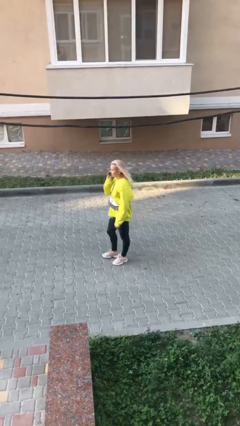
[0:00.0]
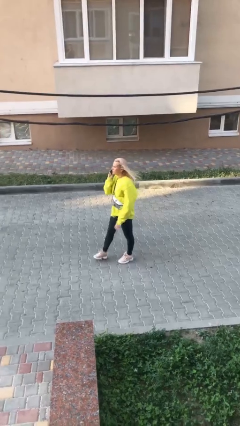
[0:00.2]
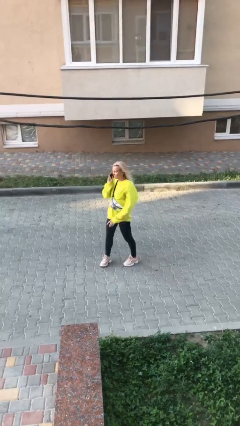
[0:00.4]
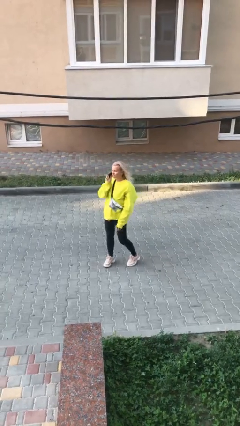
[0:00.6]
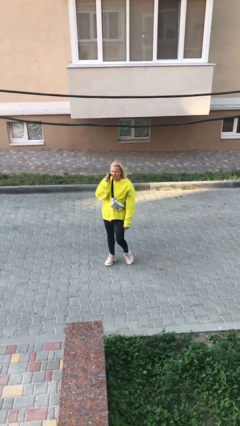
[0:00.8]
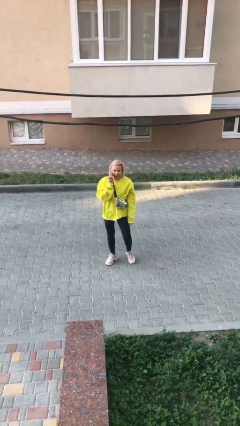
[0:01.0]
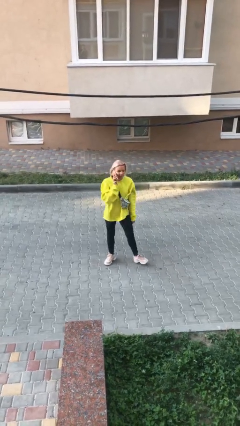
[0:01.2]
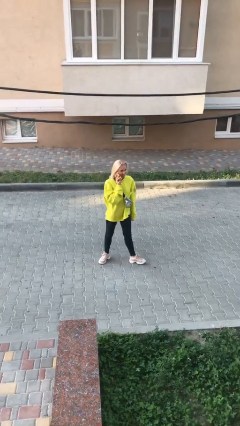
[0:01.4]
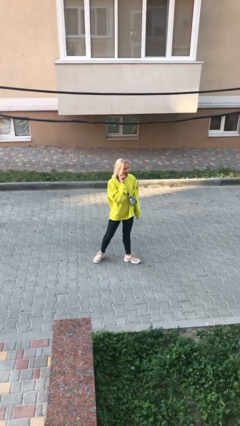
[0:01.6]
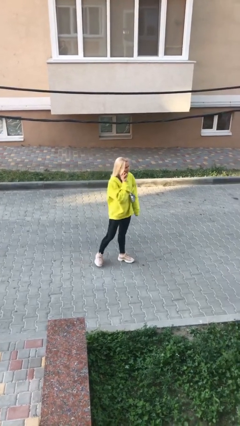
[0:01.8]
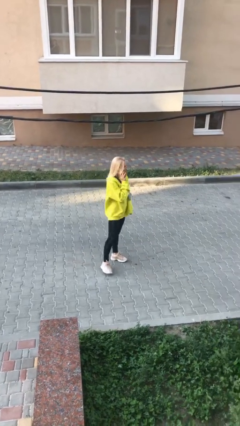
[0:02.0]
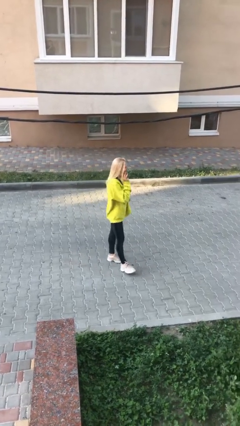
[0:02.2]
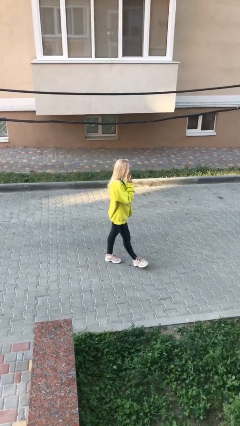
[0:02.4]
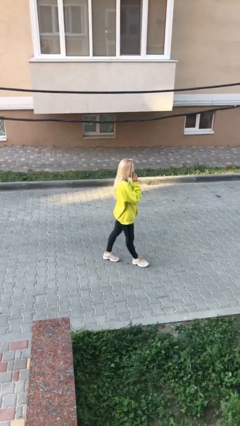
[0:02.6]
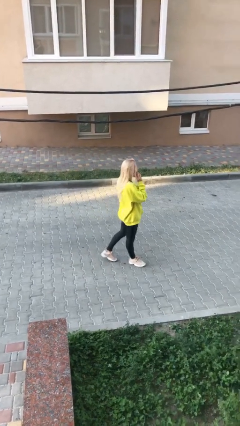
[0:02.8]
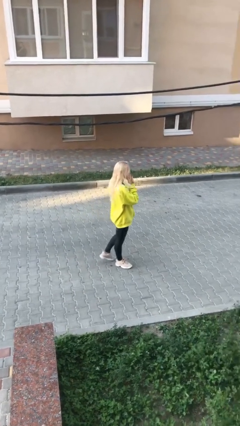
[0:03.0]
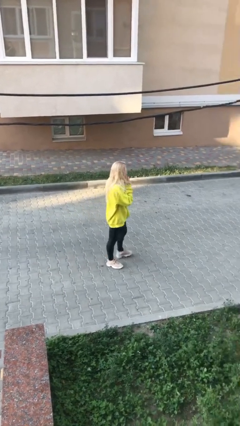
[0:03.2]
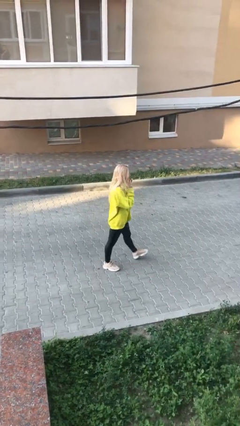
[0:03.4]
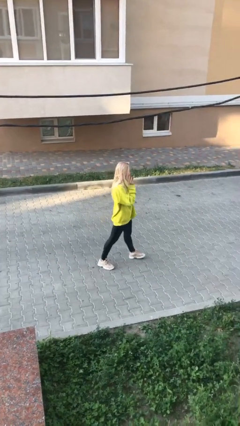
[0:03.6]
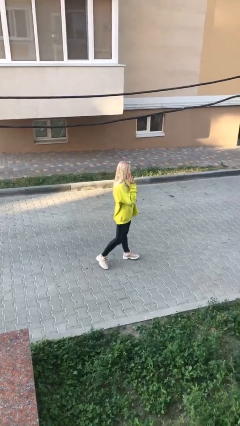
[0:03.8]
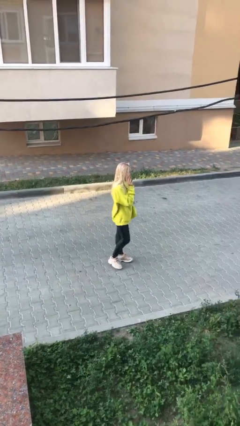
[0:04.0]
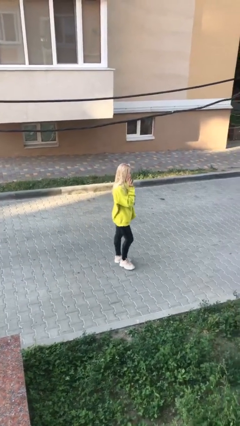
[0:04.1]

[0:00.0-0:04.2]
person talks on phone

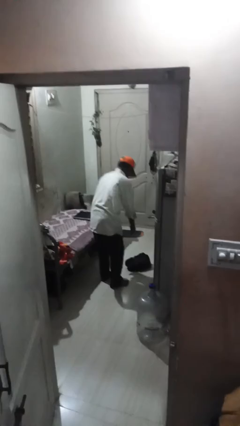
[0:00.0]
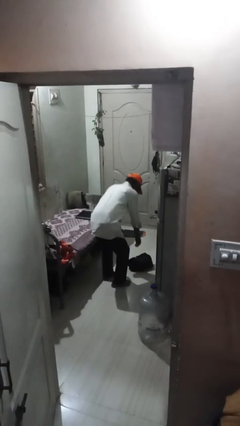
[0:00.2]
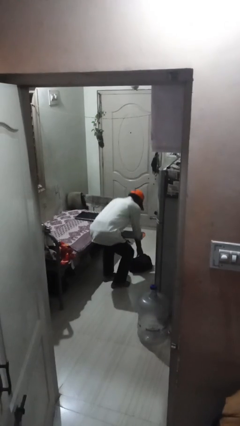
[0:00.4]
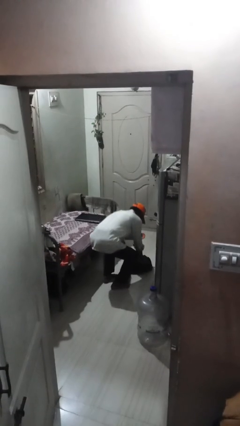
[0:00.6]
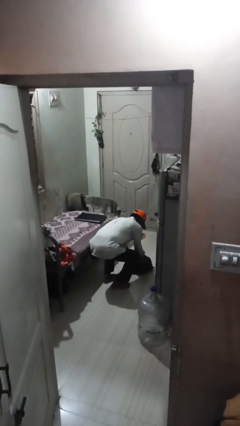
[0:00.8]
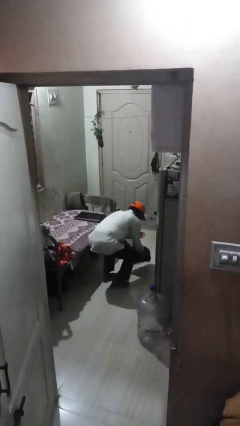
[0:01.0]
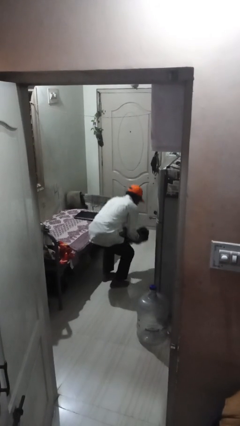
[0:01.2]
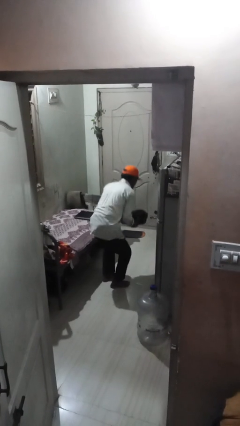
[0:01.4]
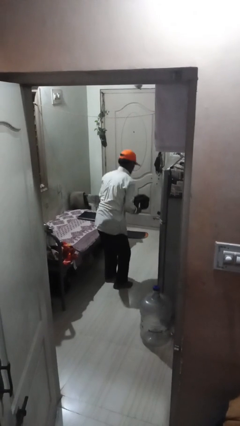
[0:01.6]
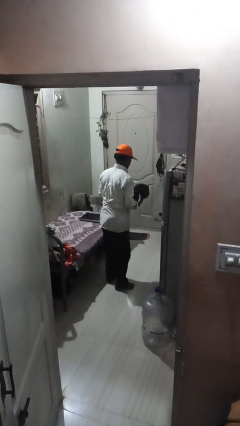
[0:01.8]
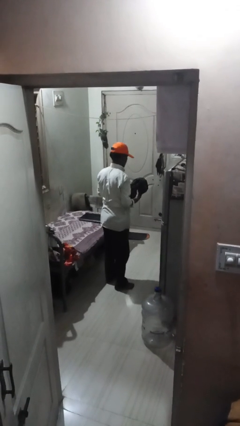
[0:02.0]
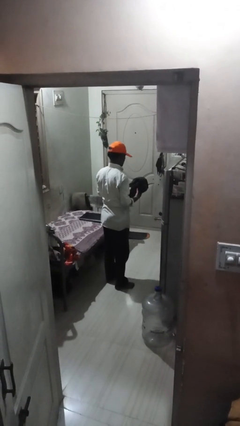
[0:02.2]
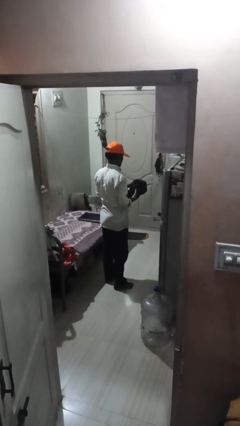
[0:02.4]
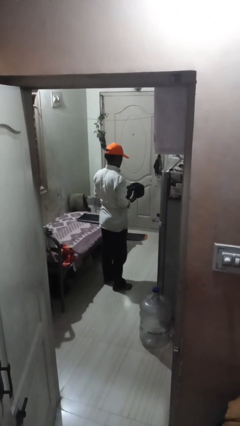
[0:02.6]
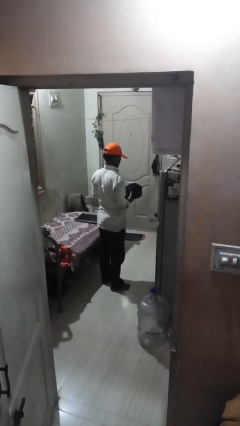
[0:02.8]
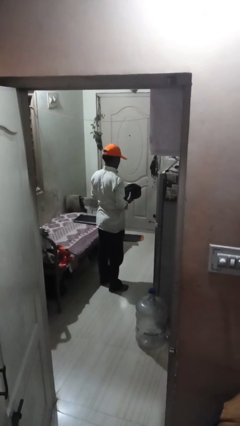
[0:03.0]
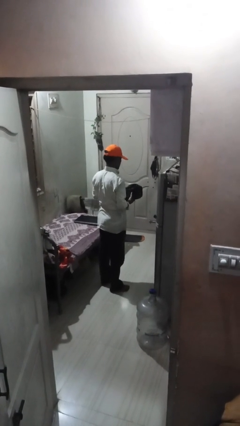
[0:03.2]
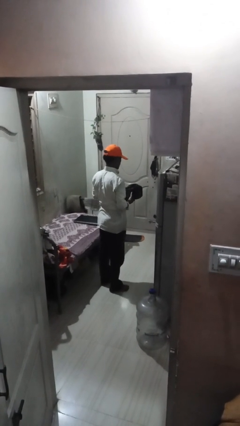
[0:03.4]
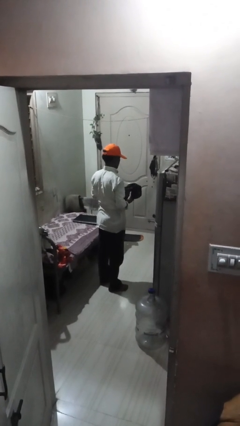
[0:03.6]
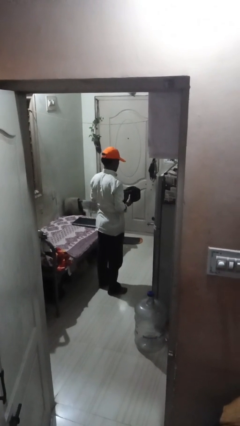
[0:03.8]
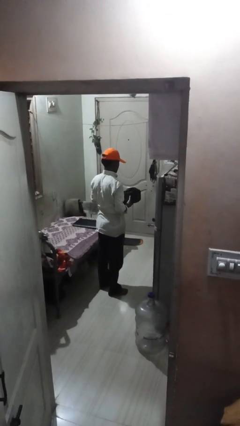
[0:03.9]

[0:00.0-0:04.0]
person picks up object from floor

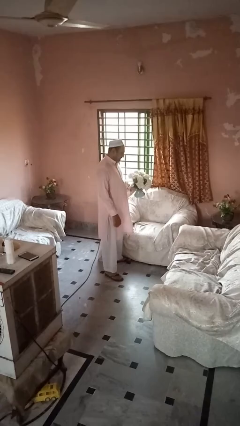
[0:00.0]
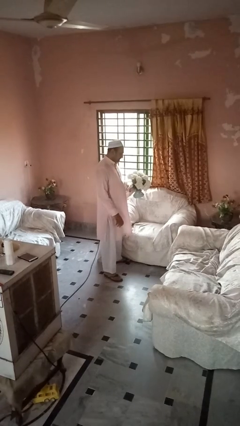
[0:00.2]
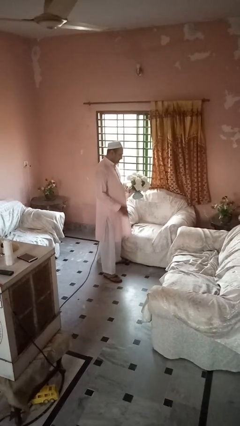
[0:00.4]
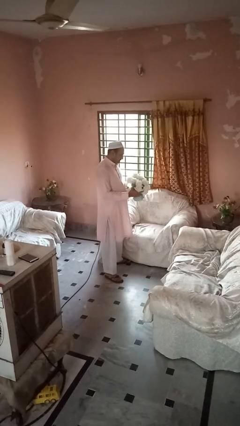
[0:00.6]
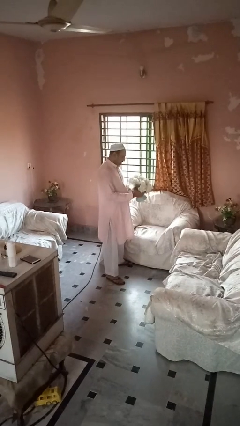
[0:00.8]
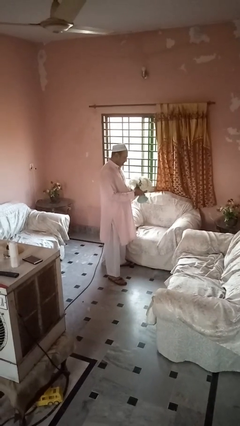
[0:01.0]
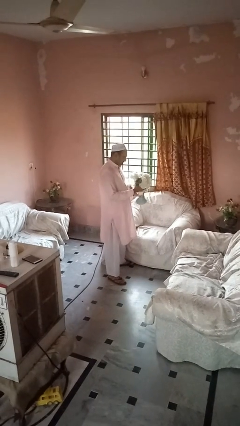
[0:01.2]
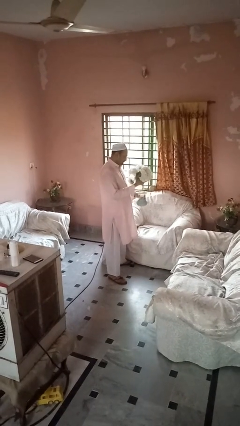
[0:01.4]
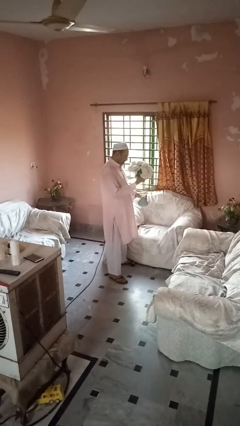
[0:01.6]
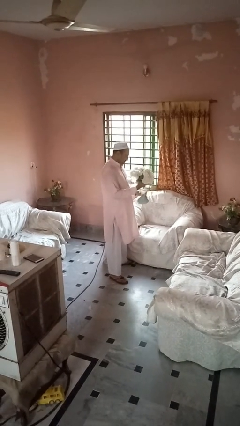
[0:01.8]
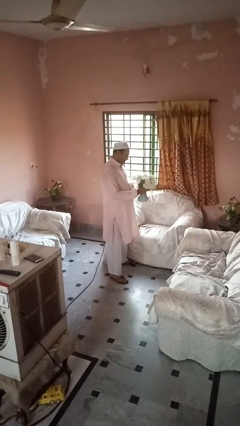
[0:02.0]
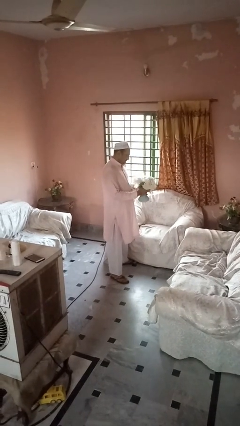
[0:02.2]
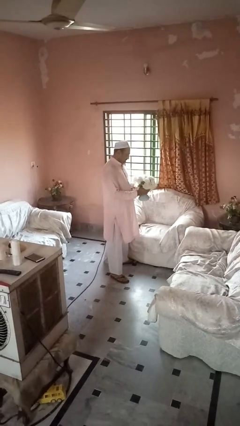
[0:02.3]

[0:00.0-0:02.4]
person arranges flowers in vase

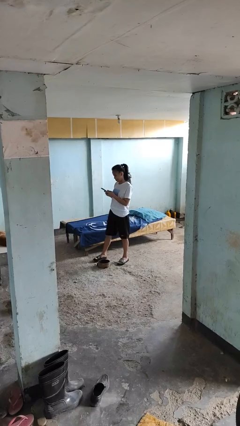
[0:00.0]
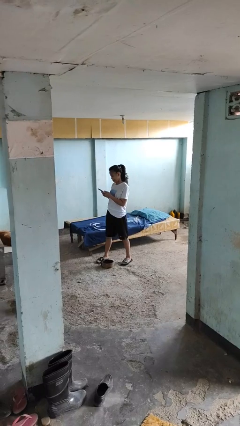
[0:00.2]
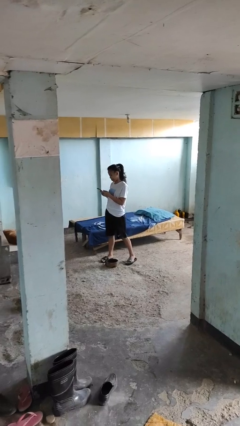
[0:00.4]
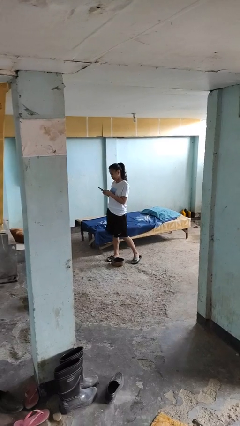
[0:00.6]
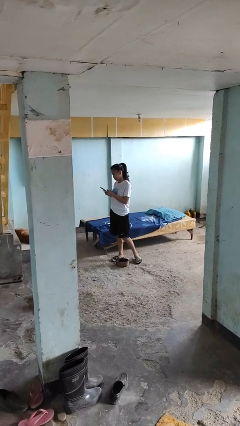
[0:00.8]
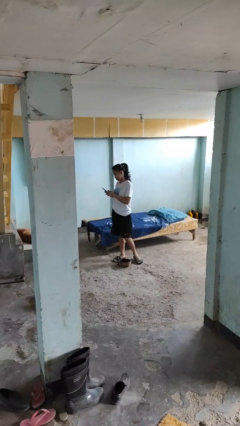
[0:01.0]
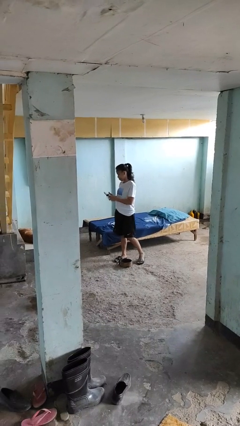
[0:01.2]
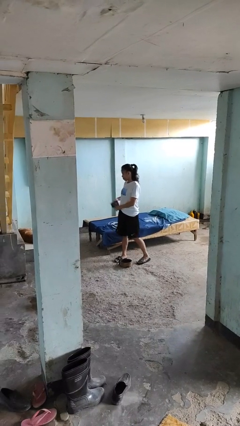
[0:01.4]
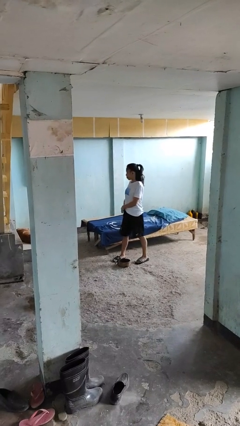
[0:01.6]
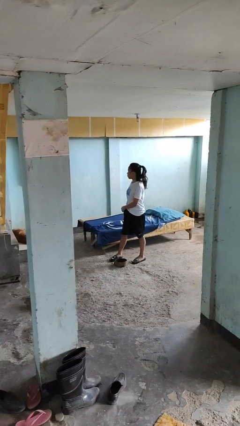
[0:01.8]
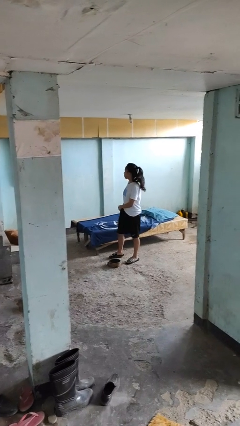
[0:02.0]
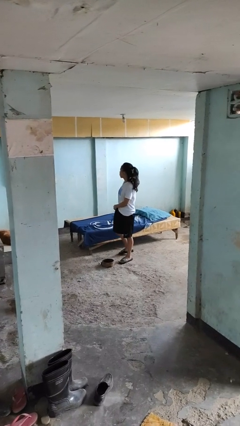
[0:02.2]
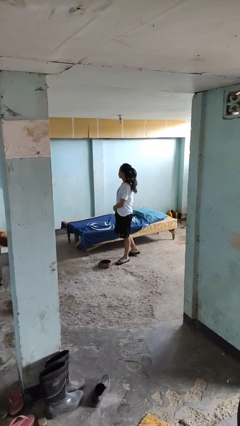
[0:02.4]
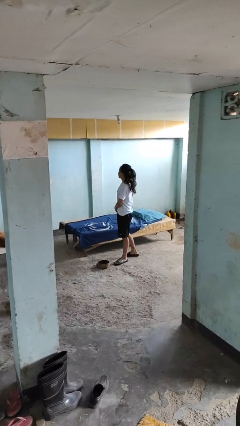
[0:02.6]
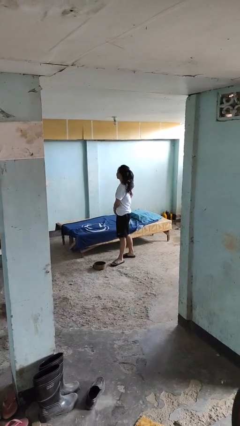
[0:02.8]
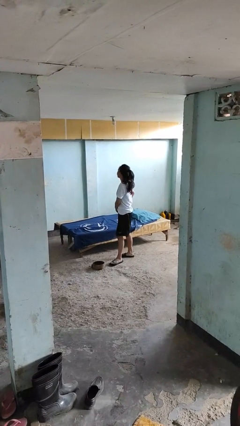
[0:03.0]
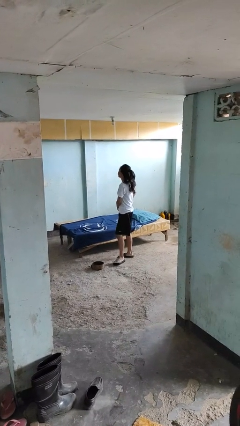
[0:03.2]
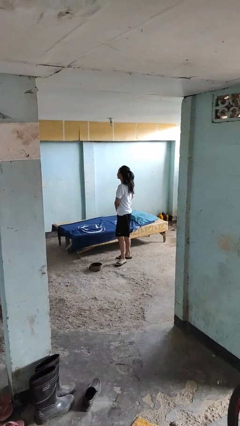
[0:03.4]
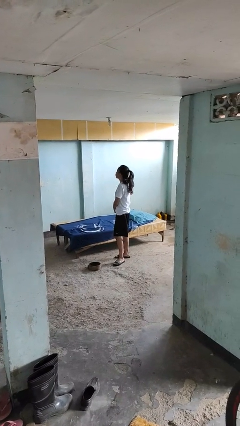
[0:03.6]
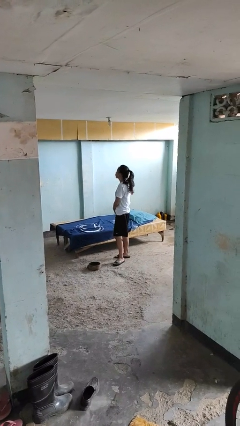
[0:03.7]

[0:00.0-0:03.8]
person puts phone into pocket

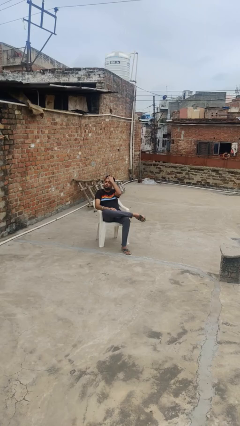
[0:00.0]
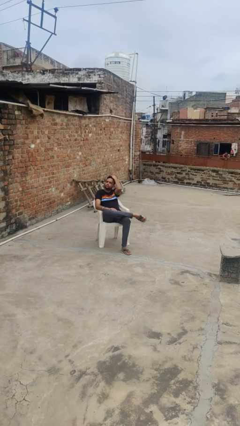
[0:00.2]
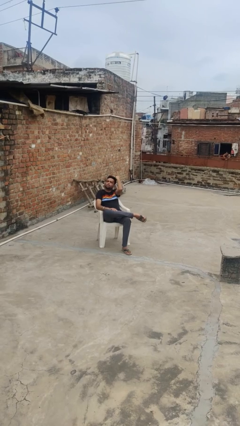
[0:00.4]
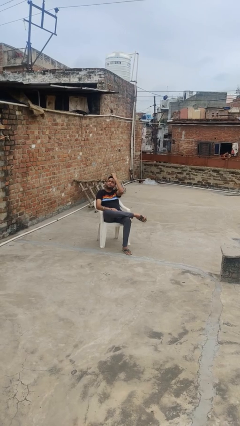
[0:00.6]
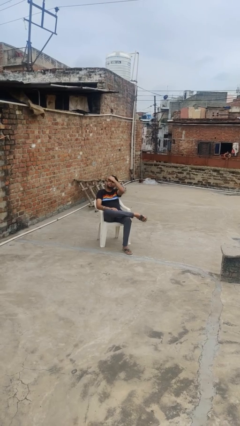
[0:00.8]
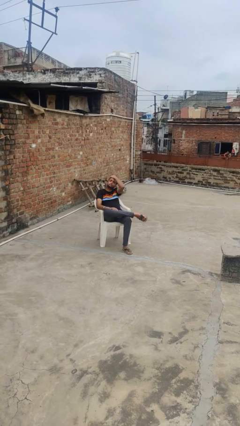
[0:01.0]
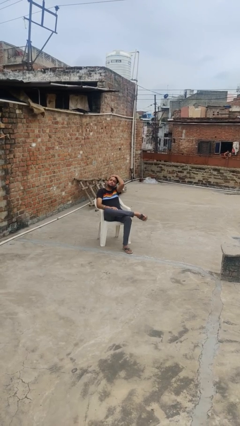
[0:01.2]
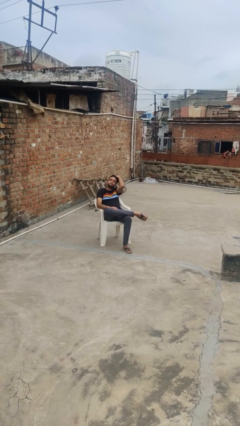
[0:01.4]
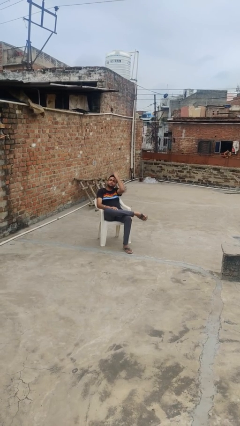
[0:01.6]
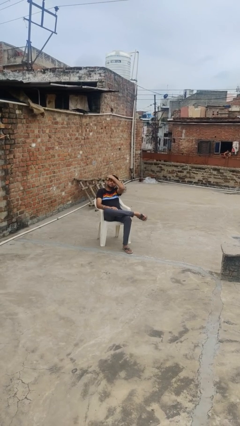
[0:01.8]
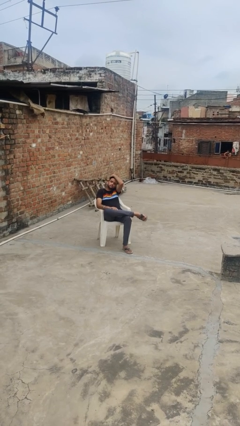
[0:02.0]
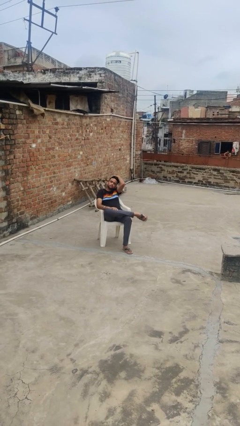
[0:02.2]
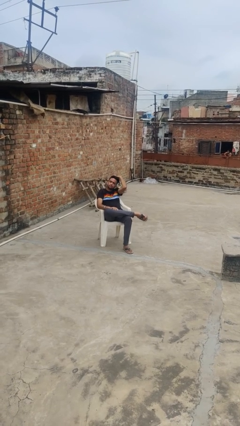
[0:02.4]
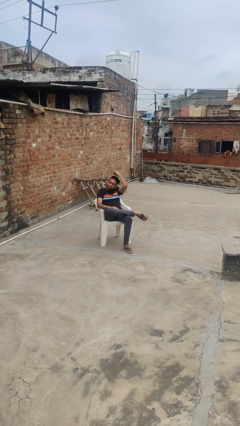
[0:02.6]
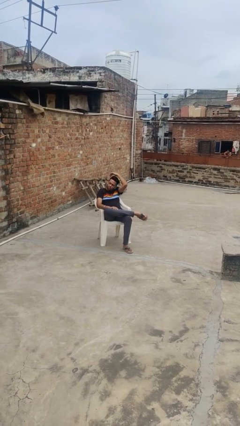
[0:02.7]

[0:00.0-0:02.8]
person strokes hair
